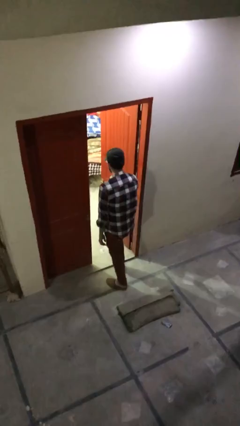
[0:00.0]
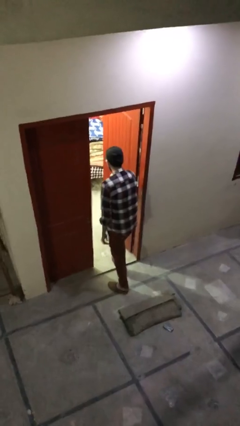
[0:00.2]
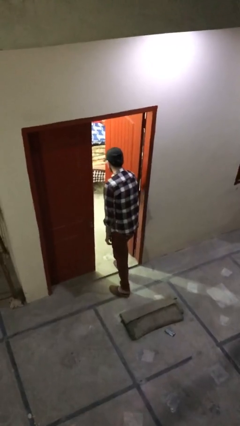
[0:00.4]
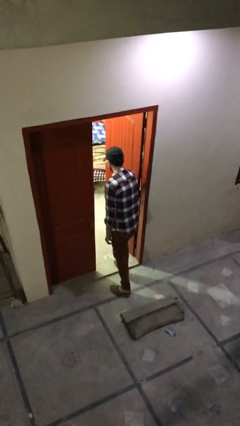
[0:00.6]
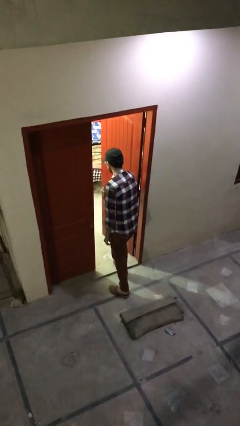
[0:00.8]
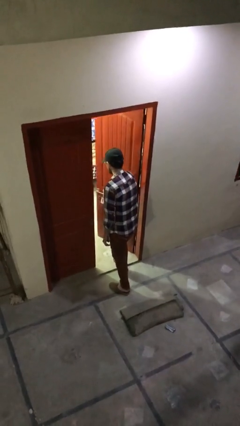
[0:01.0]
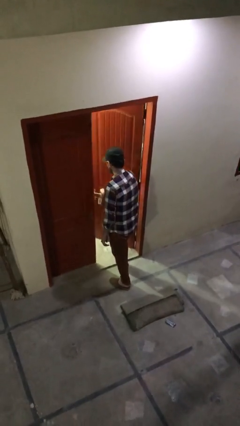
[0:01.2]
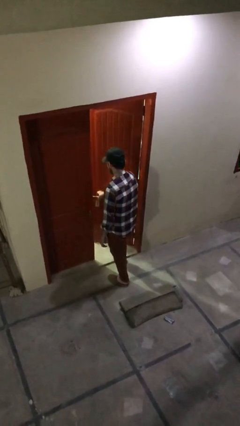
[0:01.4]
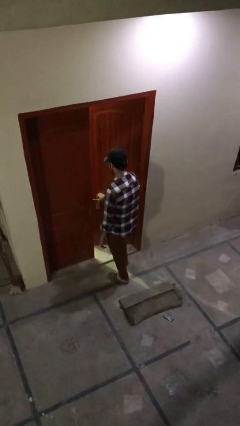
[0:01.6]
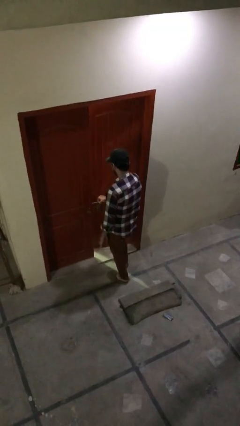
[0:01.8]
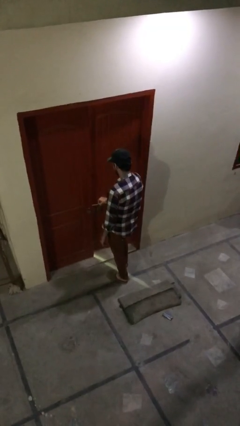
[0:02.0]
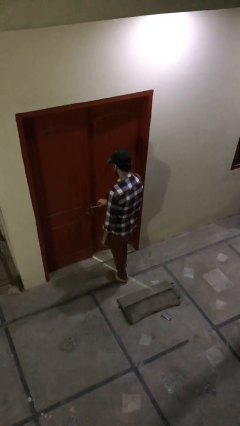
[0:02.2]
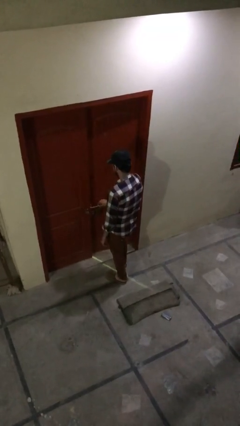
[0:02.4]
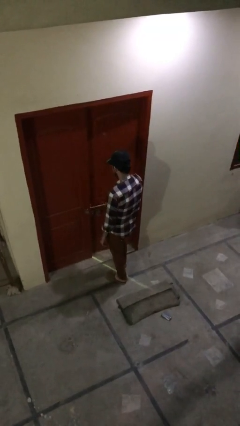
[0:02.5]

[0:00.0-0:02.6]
person closes facility door

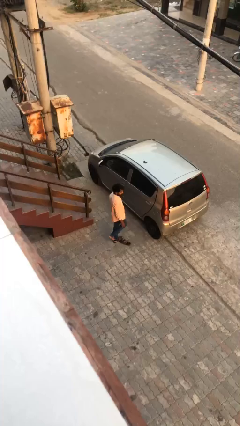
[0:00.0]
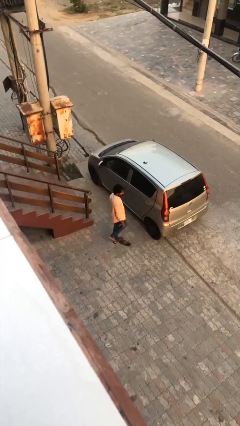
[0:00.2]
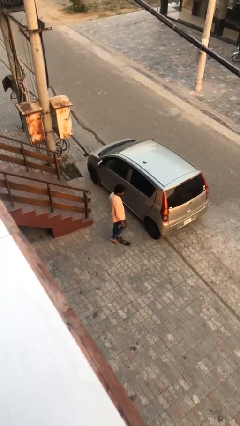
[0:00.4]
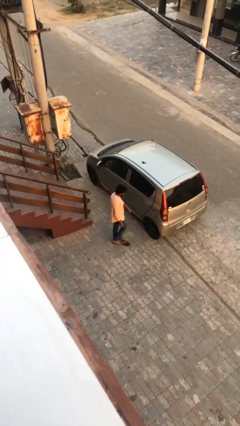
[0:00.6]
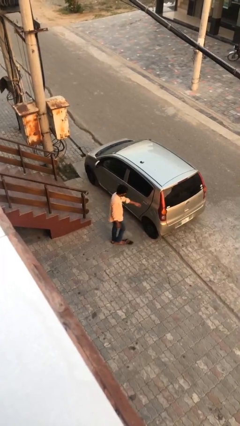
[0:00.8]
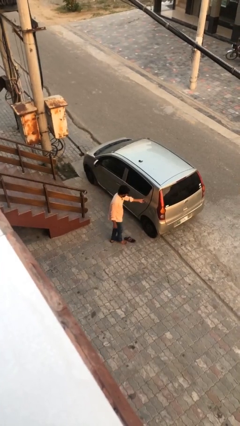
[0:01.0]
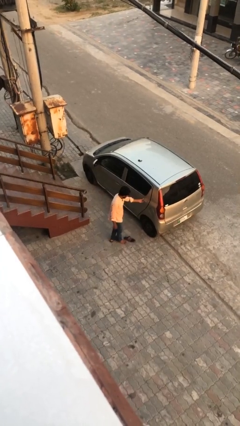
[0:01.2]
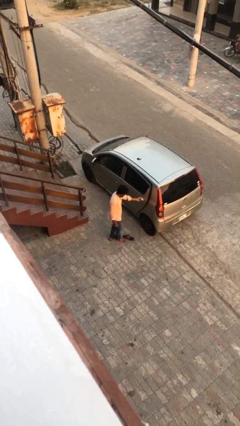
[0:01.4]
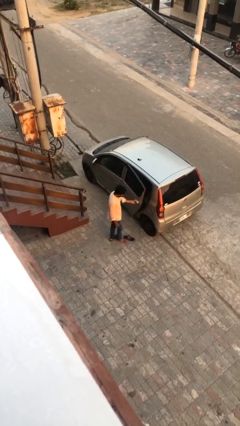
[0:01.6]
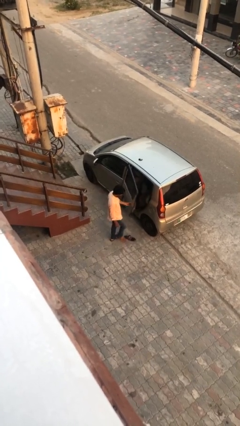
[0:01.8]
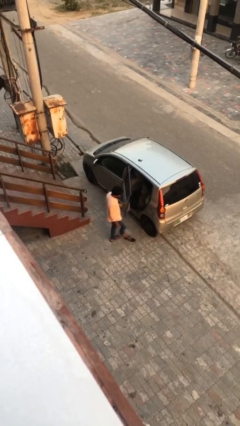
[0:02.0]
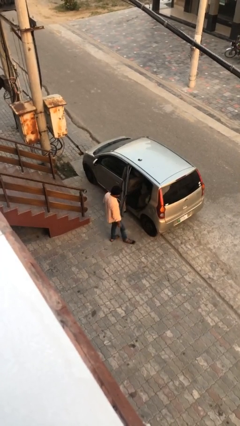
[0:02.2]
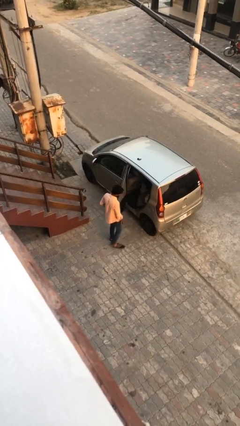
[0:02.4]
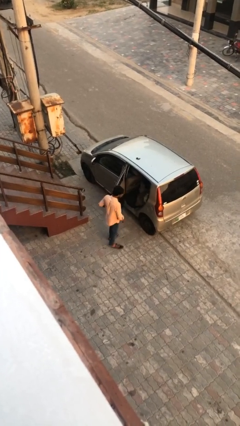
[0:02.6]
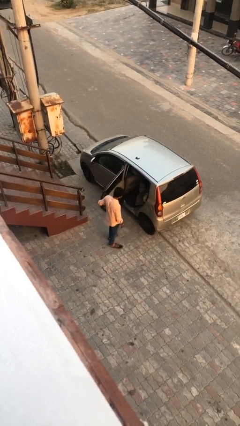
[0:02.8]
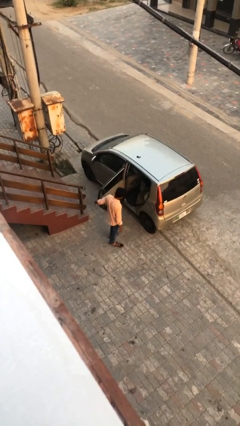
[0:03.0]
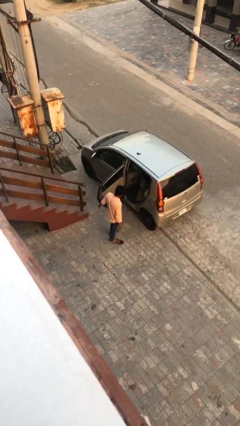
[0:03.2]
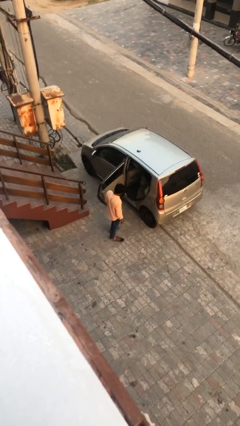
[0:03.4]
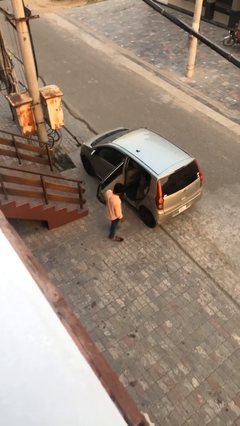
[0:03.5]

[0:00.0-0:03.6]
person opens car door

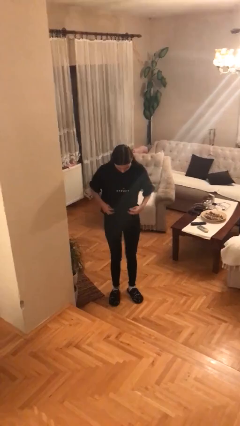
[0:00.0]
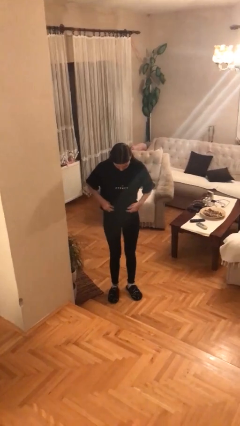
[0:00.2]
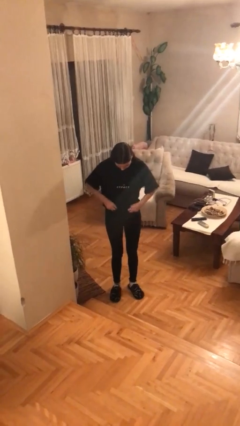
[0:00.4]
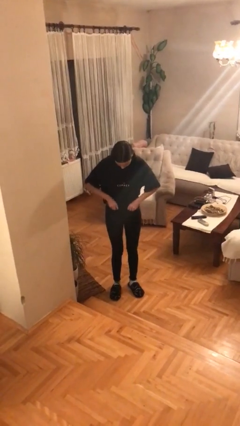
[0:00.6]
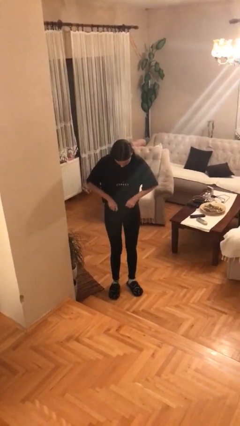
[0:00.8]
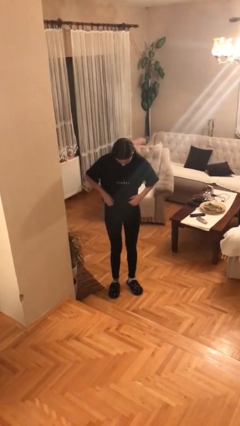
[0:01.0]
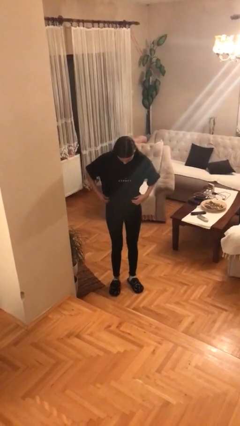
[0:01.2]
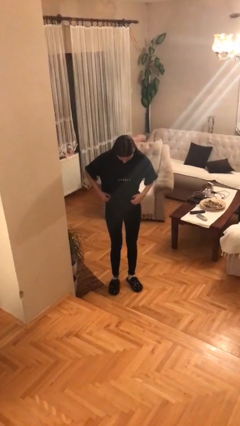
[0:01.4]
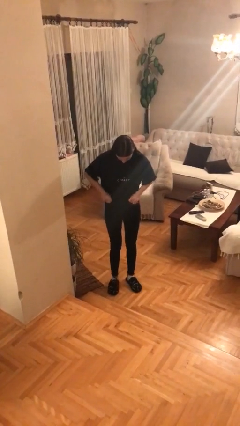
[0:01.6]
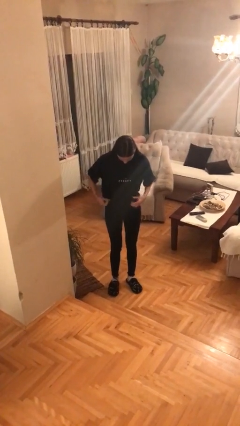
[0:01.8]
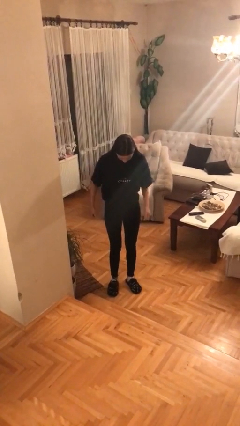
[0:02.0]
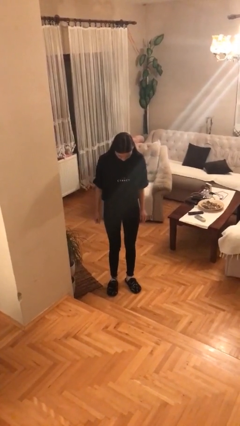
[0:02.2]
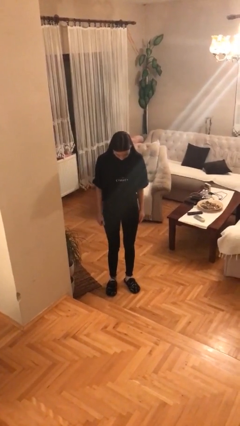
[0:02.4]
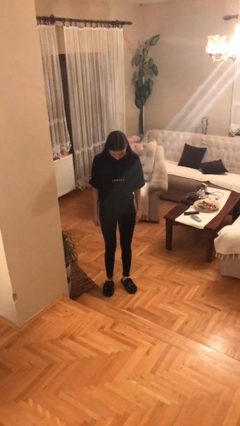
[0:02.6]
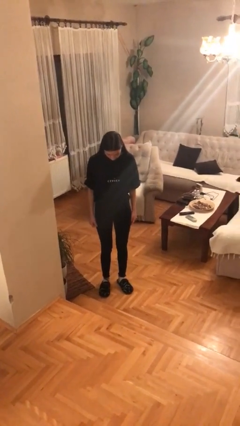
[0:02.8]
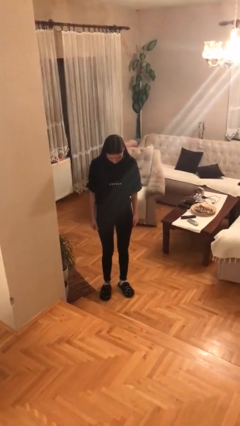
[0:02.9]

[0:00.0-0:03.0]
person tucks in shirt

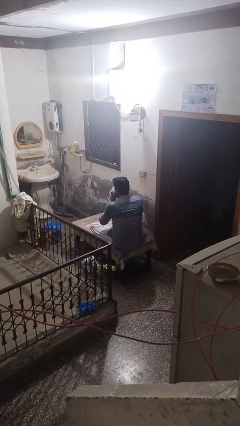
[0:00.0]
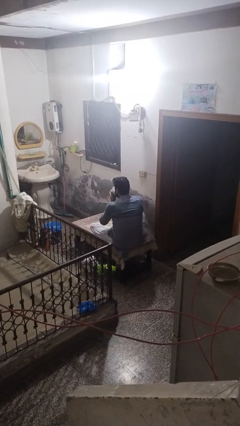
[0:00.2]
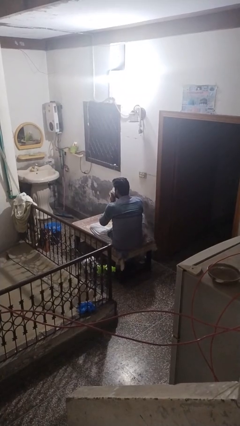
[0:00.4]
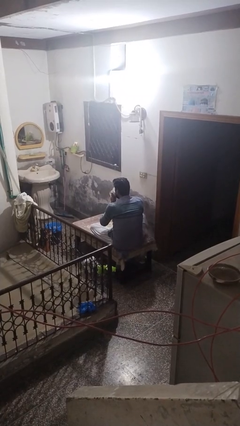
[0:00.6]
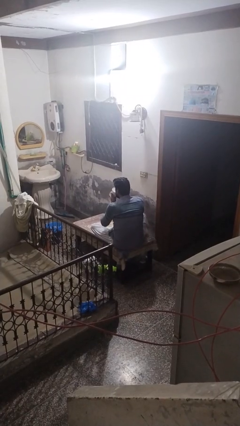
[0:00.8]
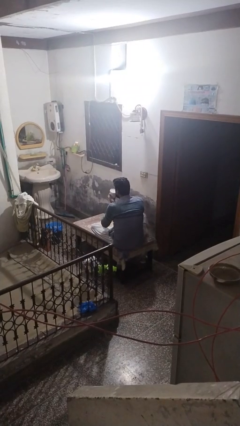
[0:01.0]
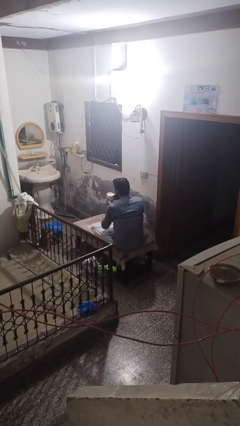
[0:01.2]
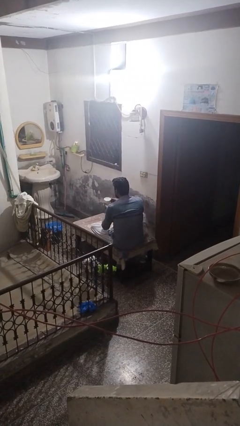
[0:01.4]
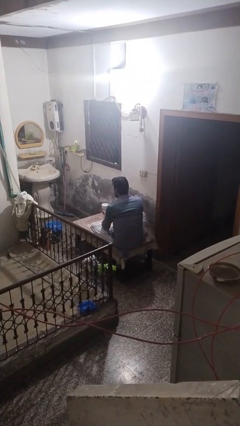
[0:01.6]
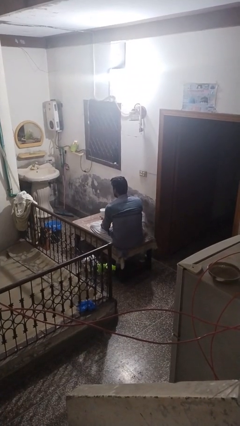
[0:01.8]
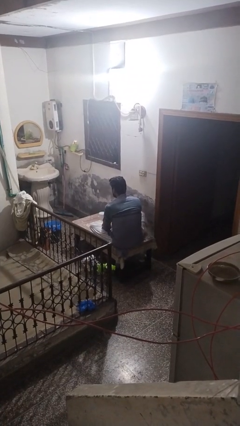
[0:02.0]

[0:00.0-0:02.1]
person puts down object on table

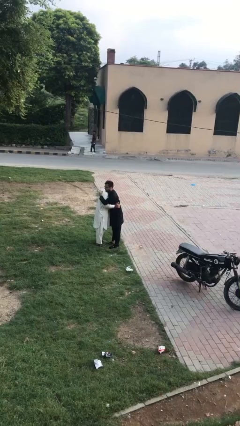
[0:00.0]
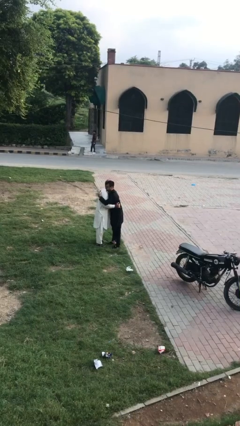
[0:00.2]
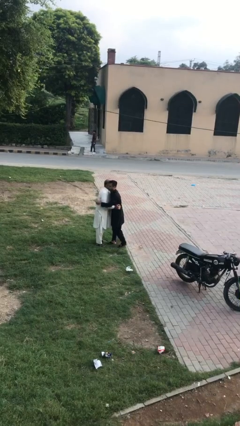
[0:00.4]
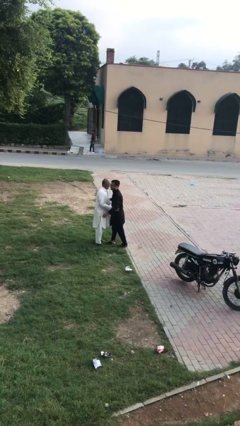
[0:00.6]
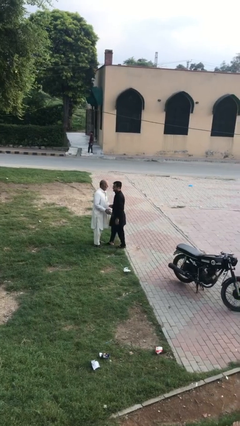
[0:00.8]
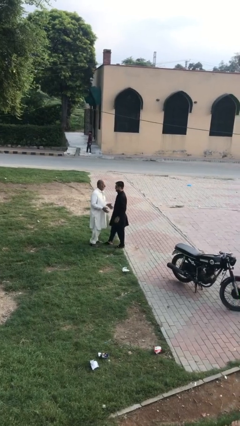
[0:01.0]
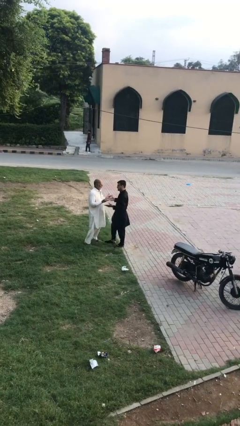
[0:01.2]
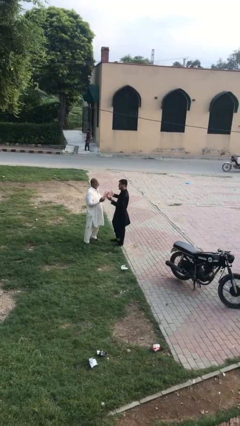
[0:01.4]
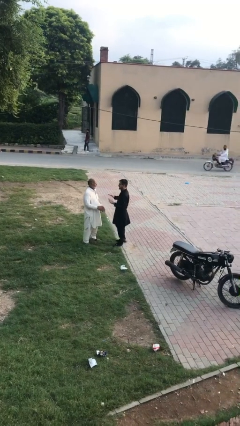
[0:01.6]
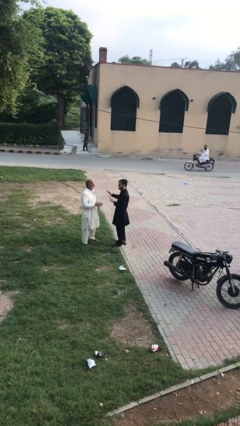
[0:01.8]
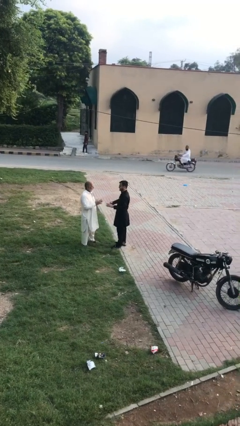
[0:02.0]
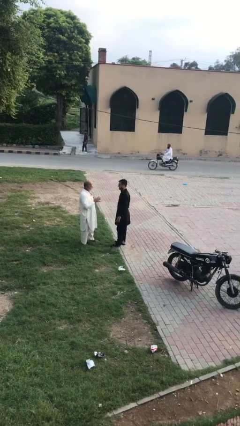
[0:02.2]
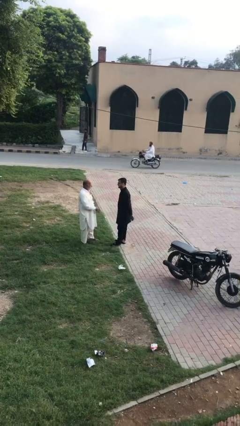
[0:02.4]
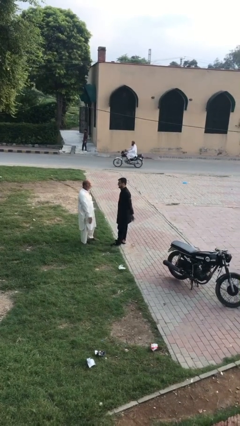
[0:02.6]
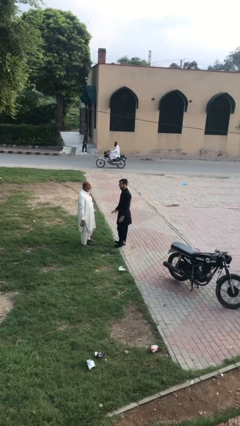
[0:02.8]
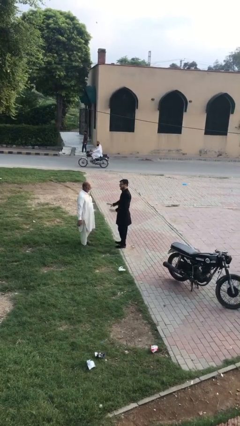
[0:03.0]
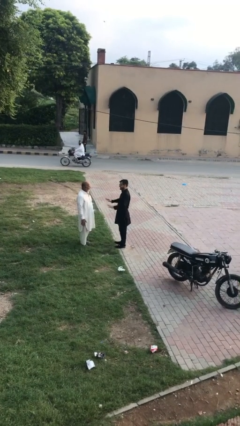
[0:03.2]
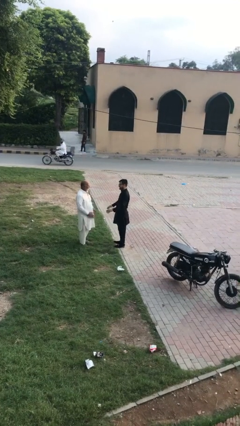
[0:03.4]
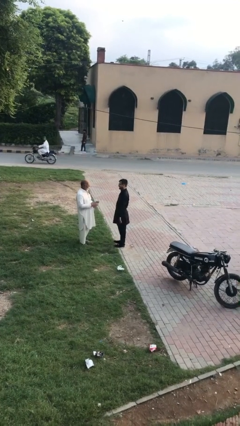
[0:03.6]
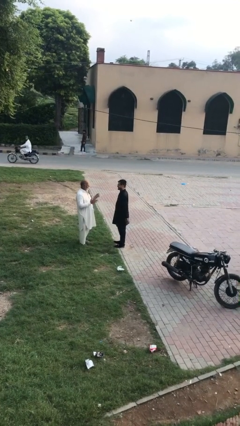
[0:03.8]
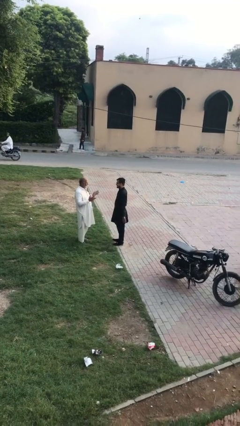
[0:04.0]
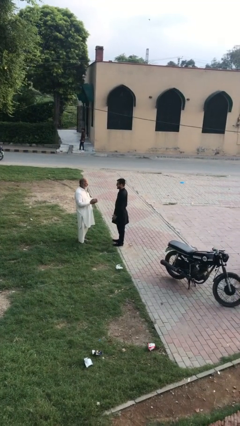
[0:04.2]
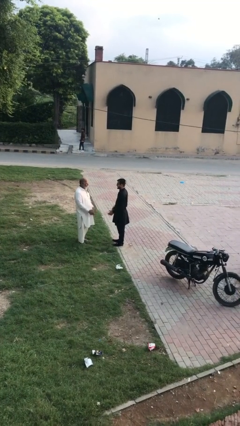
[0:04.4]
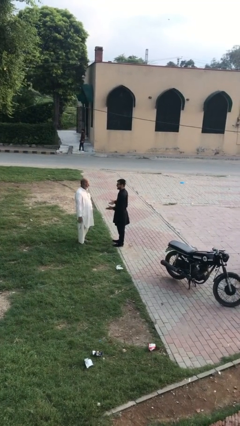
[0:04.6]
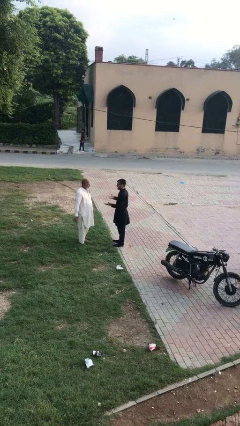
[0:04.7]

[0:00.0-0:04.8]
person talks to person

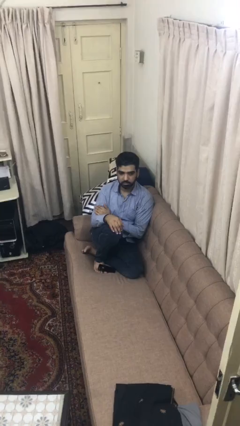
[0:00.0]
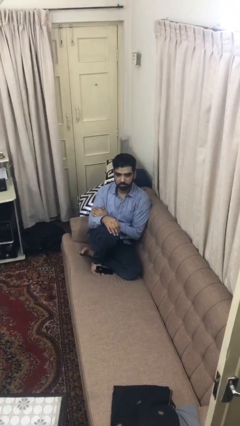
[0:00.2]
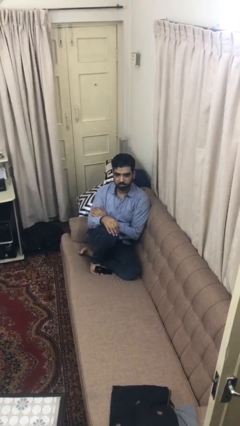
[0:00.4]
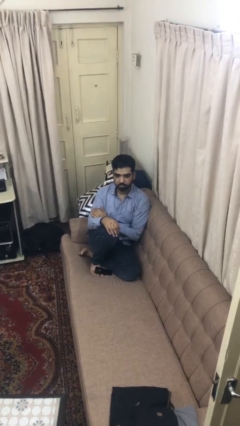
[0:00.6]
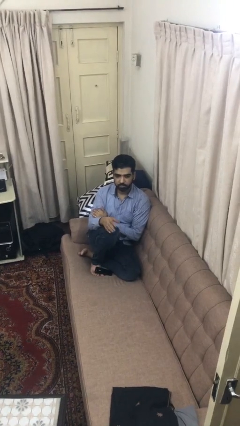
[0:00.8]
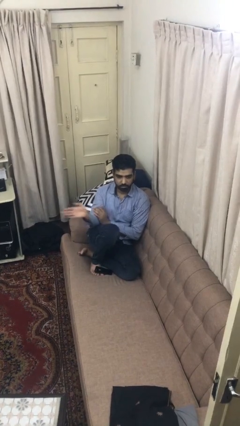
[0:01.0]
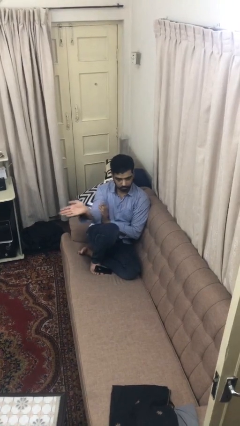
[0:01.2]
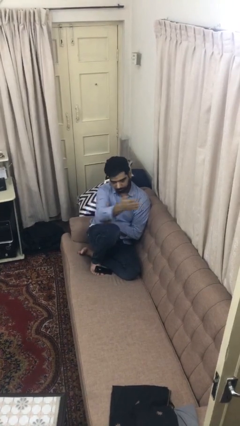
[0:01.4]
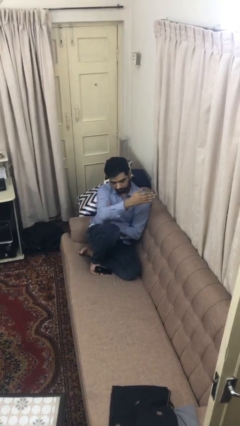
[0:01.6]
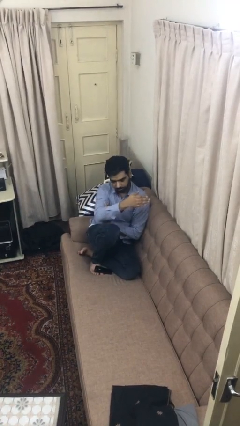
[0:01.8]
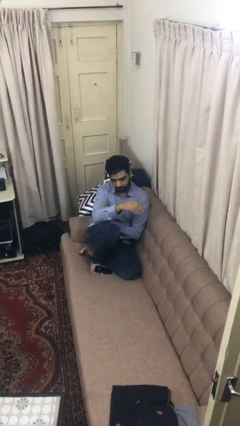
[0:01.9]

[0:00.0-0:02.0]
person gestures swipe left
